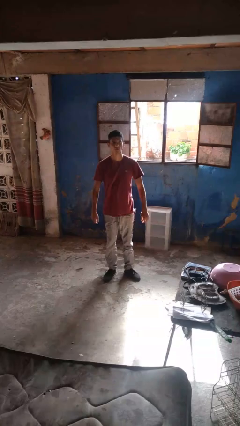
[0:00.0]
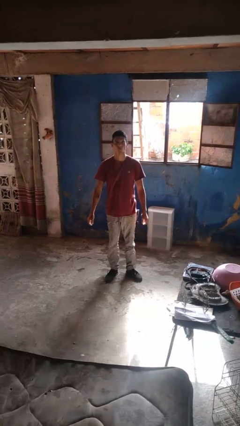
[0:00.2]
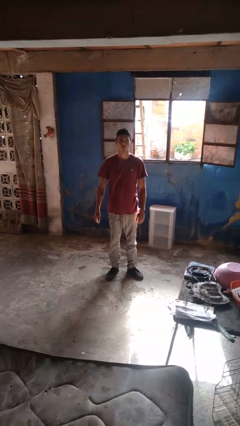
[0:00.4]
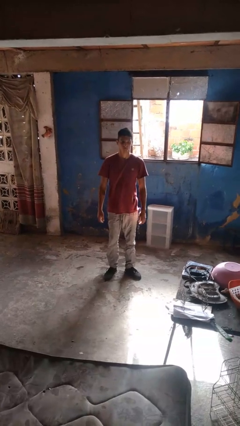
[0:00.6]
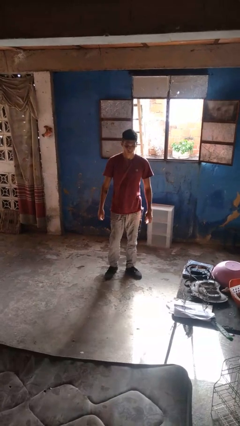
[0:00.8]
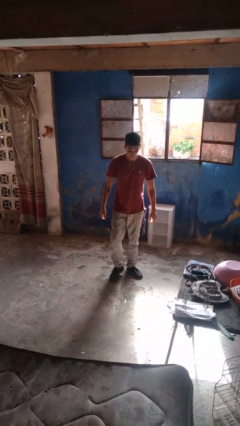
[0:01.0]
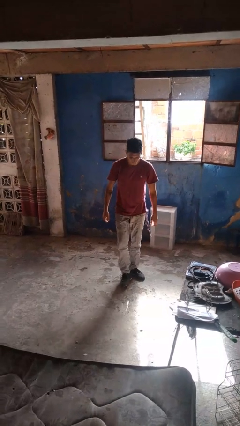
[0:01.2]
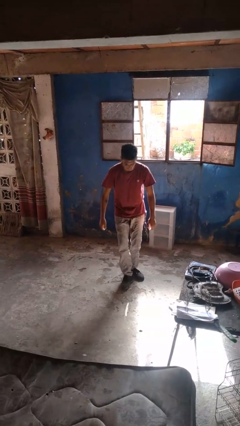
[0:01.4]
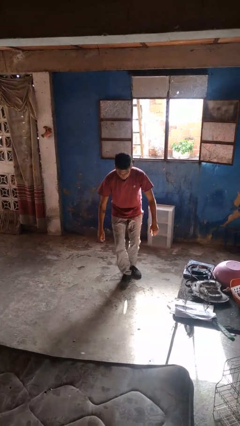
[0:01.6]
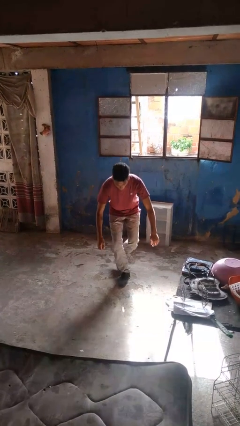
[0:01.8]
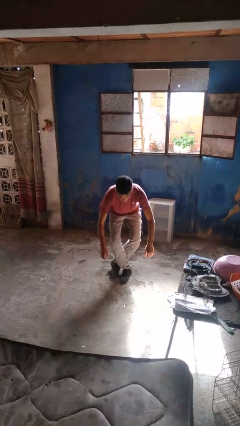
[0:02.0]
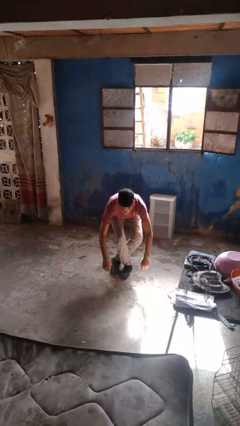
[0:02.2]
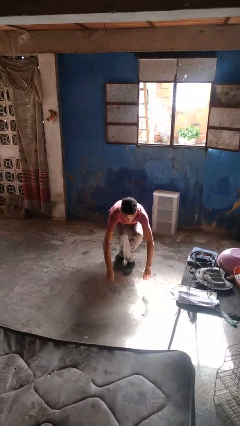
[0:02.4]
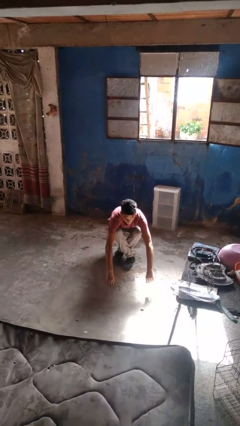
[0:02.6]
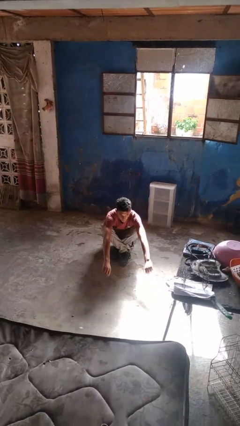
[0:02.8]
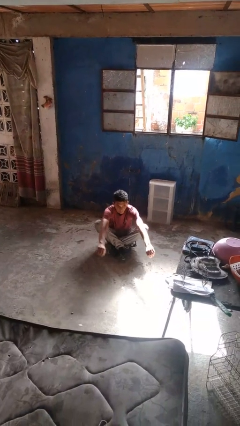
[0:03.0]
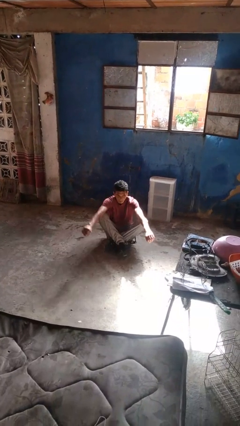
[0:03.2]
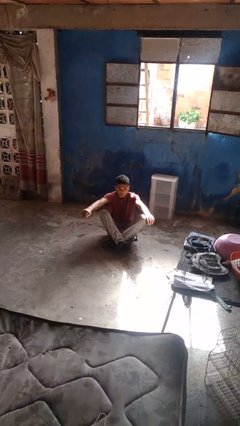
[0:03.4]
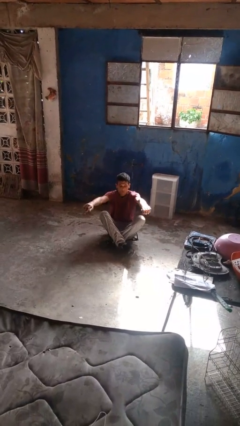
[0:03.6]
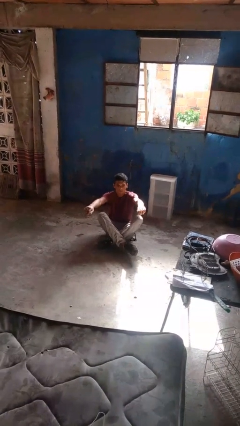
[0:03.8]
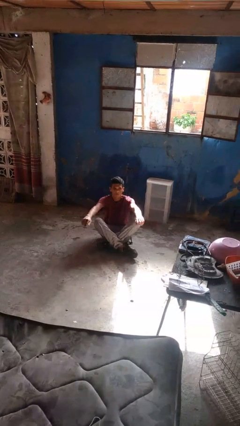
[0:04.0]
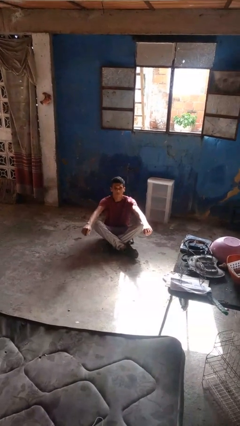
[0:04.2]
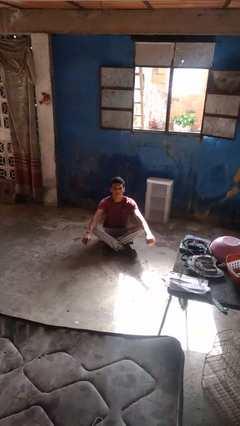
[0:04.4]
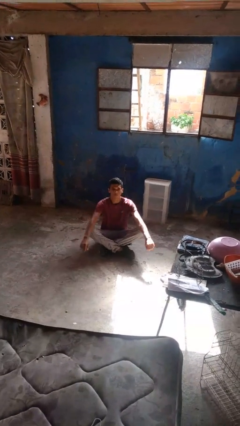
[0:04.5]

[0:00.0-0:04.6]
person sits crisscross

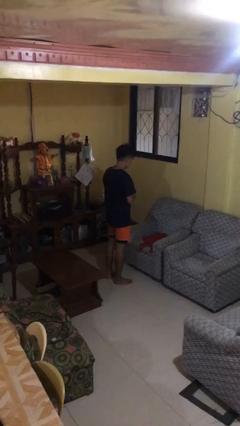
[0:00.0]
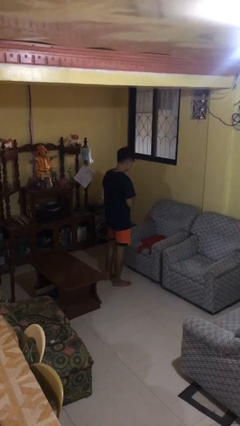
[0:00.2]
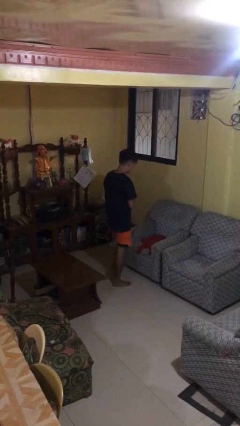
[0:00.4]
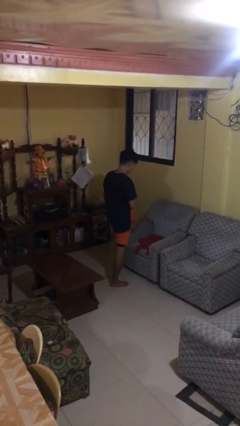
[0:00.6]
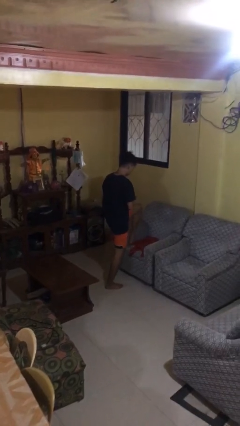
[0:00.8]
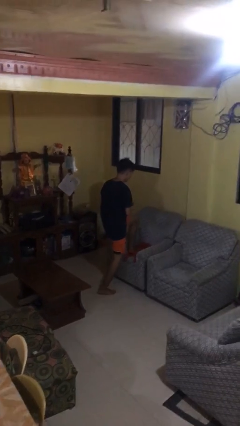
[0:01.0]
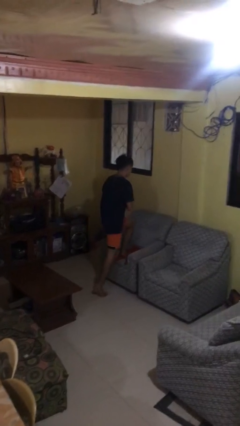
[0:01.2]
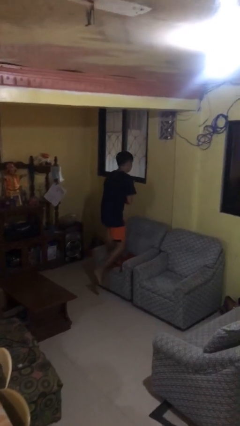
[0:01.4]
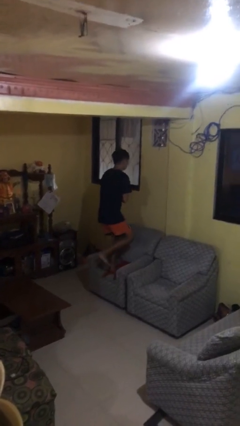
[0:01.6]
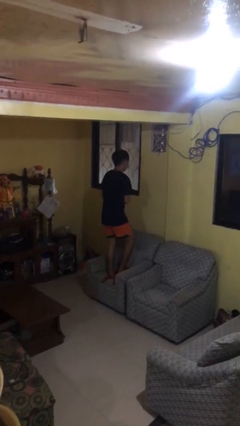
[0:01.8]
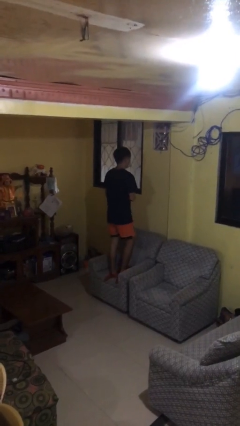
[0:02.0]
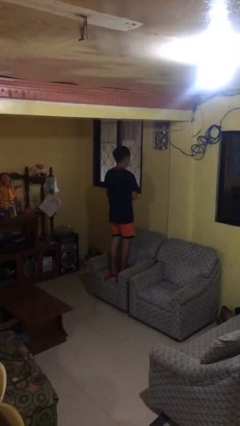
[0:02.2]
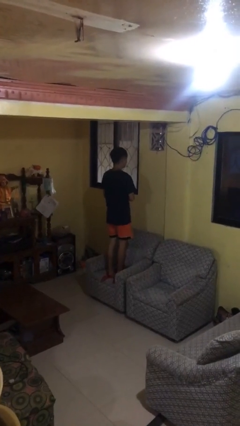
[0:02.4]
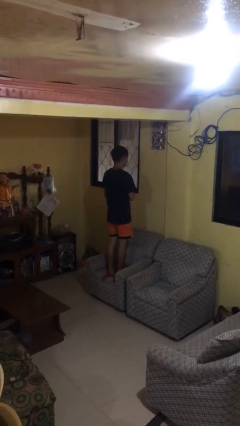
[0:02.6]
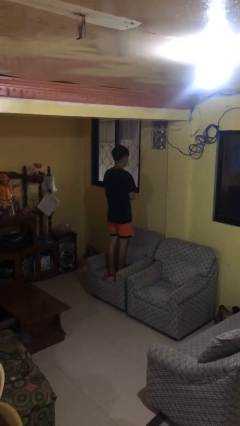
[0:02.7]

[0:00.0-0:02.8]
person climbs on couch

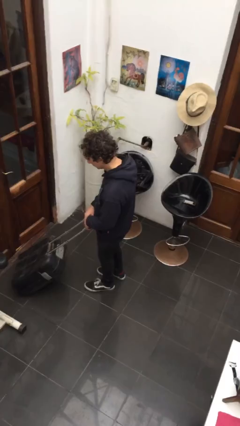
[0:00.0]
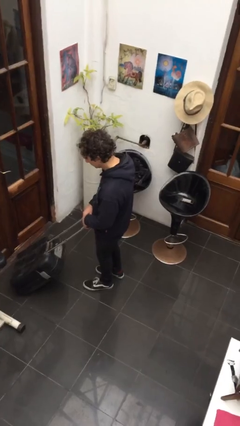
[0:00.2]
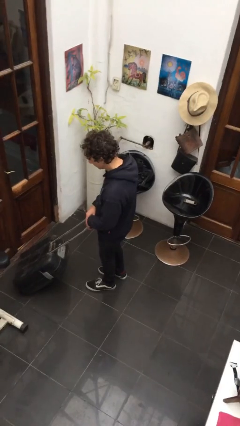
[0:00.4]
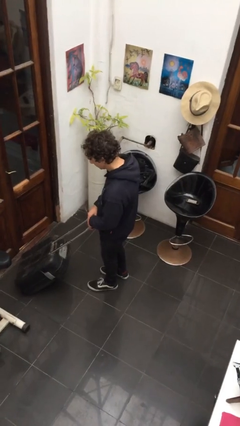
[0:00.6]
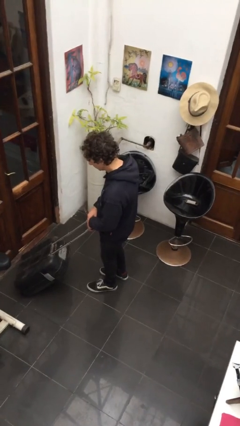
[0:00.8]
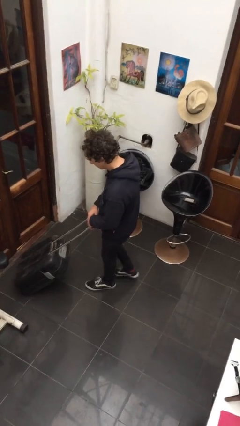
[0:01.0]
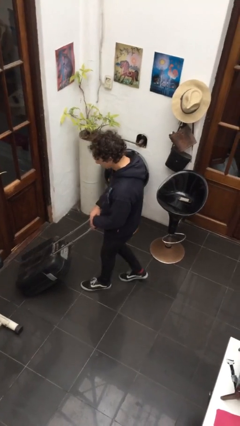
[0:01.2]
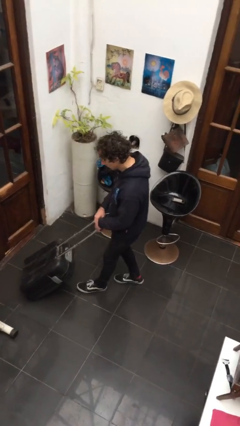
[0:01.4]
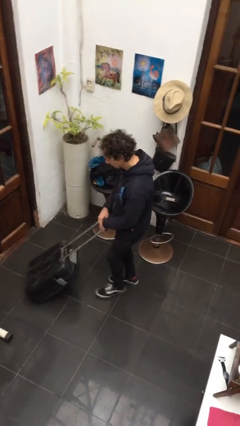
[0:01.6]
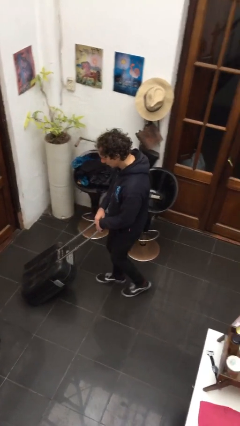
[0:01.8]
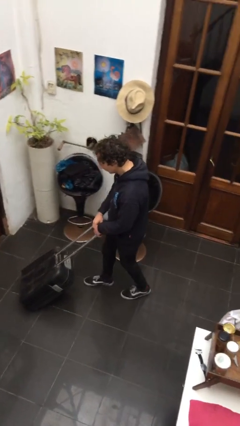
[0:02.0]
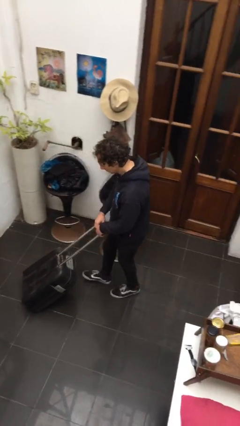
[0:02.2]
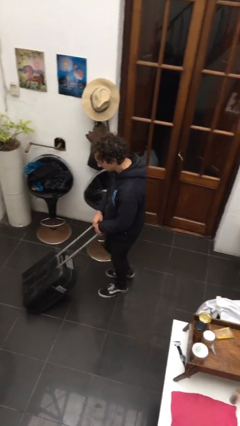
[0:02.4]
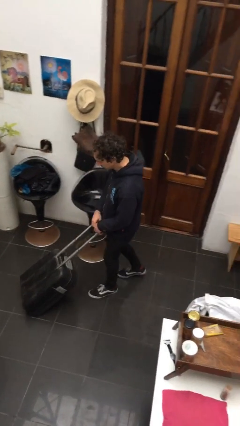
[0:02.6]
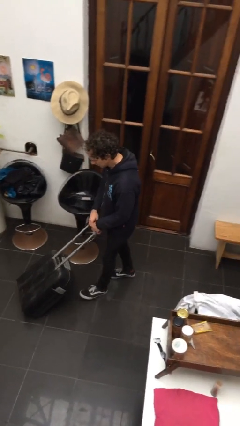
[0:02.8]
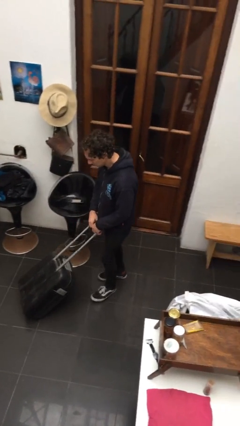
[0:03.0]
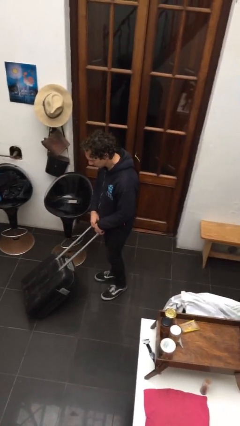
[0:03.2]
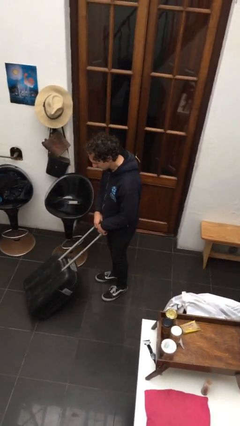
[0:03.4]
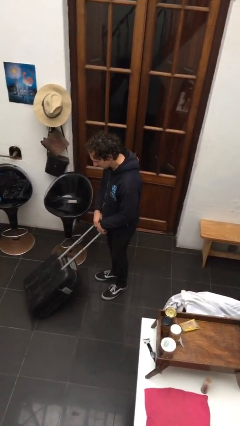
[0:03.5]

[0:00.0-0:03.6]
person pulls wheeled cart

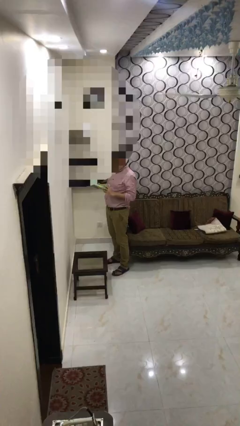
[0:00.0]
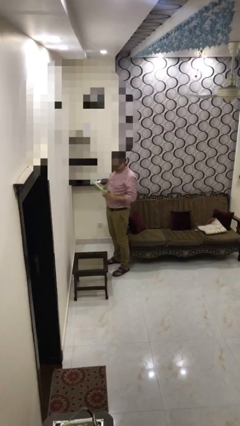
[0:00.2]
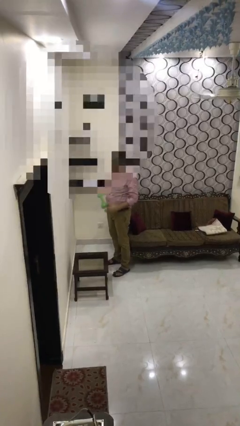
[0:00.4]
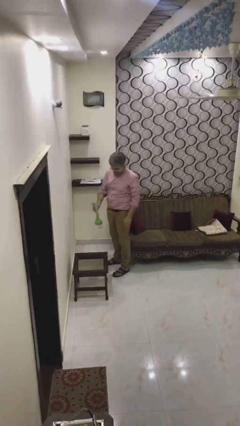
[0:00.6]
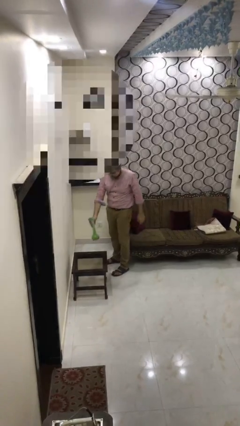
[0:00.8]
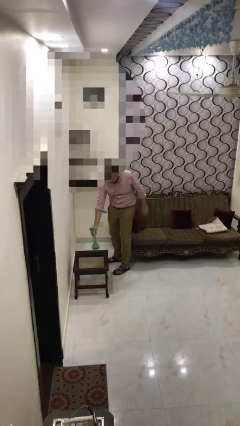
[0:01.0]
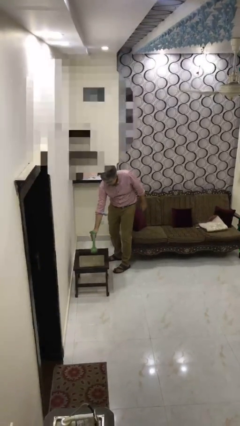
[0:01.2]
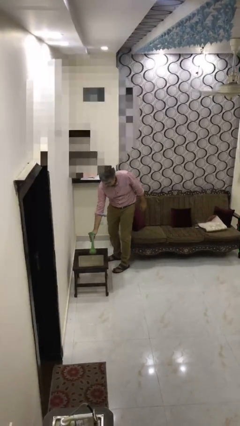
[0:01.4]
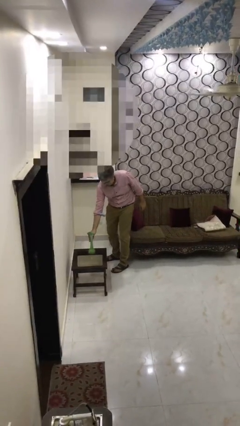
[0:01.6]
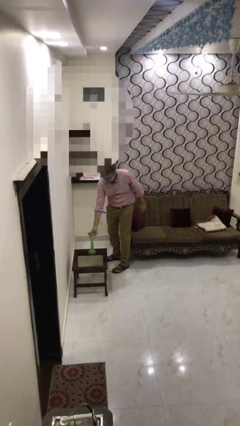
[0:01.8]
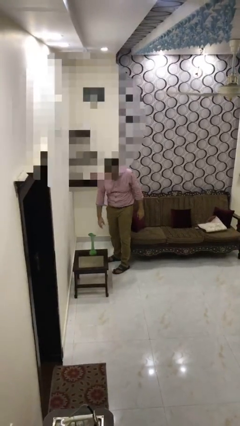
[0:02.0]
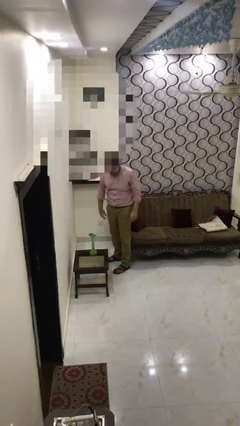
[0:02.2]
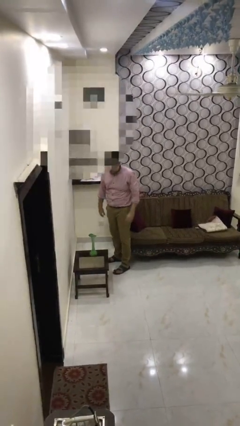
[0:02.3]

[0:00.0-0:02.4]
person puts down object on table

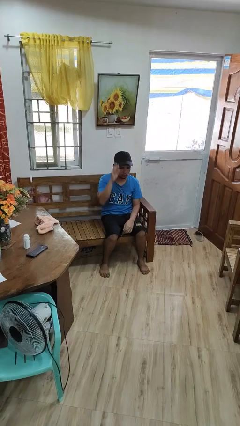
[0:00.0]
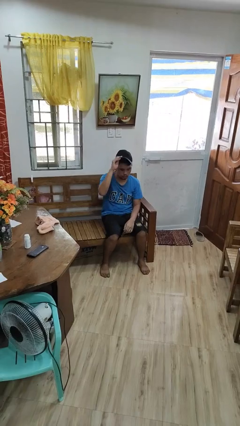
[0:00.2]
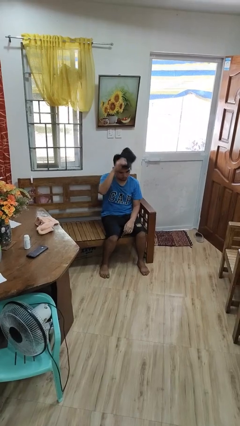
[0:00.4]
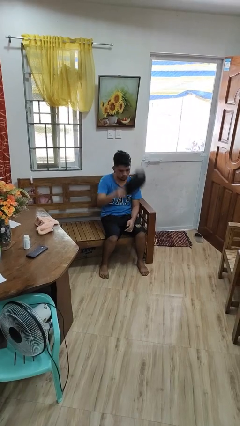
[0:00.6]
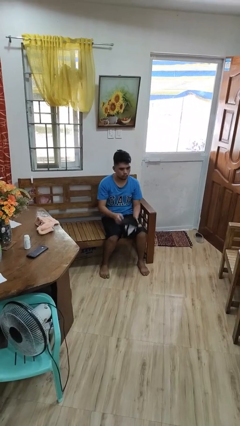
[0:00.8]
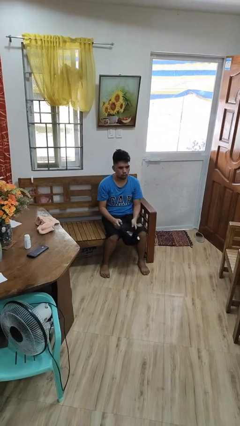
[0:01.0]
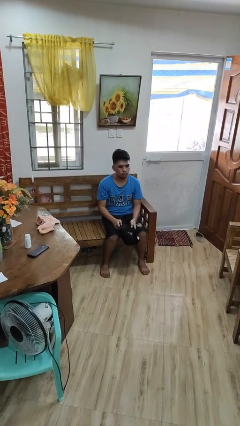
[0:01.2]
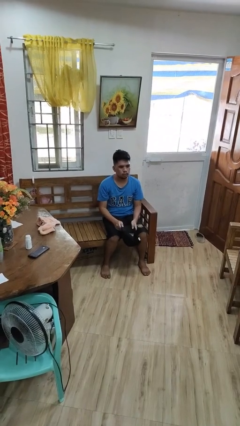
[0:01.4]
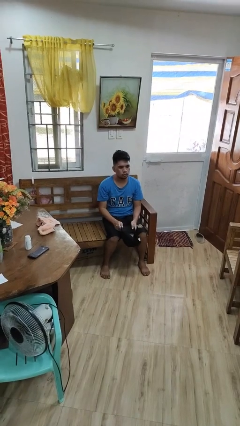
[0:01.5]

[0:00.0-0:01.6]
person takes off hat

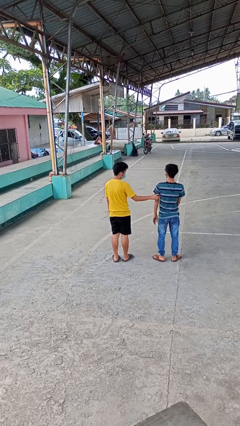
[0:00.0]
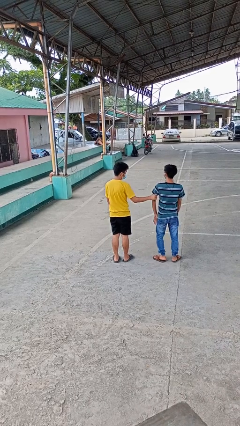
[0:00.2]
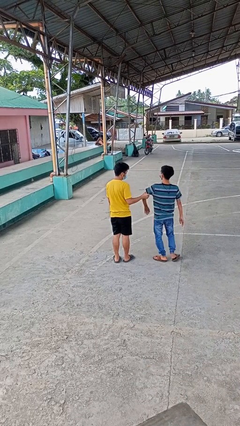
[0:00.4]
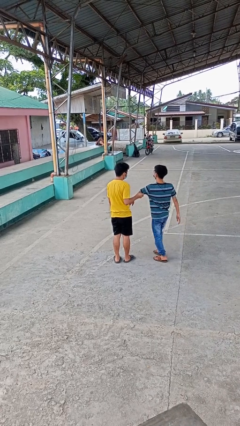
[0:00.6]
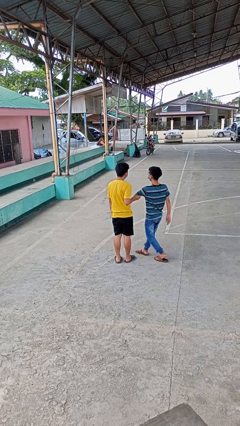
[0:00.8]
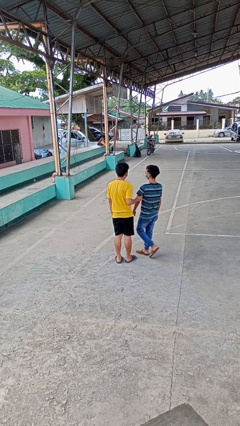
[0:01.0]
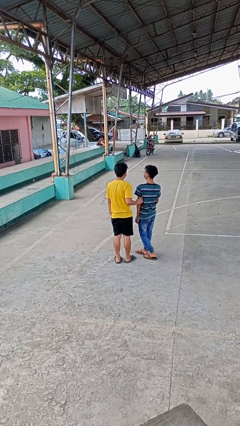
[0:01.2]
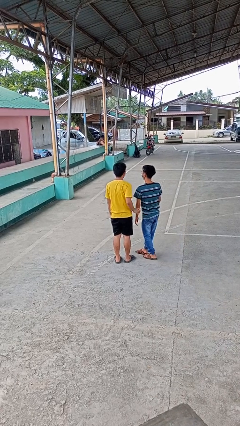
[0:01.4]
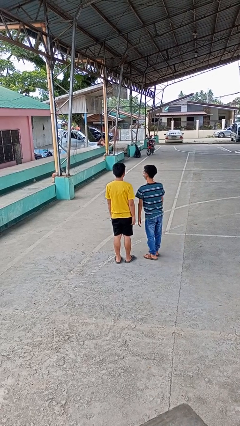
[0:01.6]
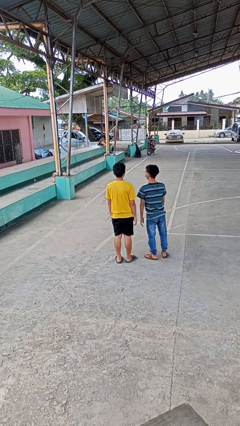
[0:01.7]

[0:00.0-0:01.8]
person grabs person by bicep

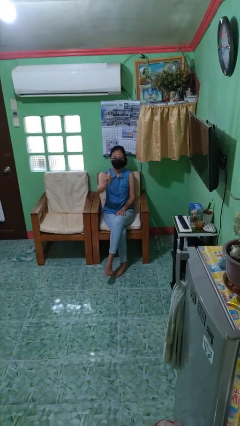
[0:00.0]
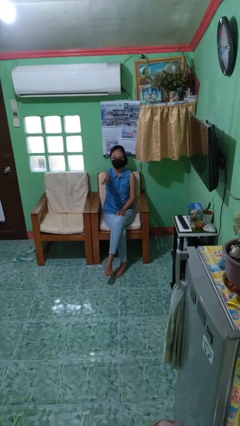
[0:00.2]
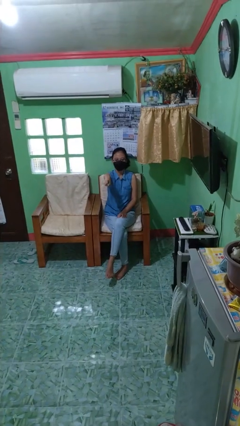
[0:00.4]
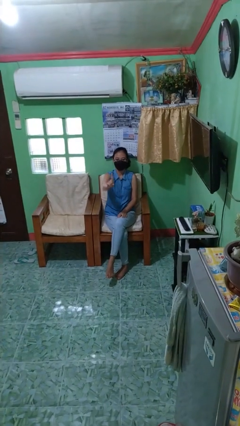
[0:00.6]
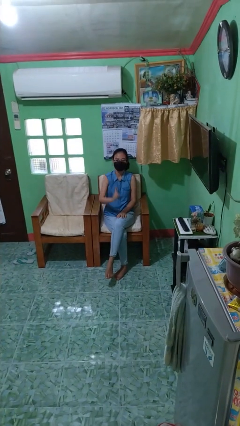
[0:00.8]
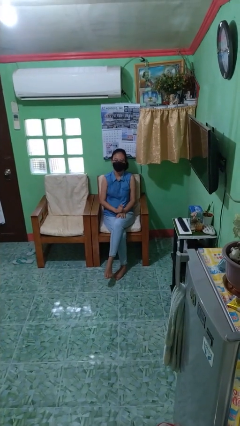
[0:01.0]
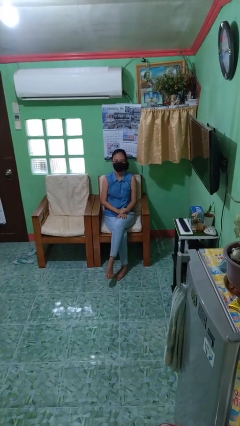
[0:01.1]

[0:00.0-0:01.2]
person gestures number one
